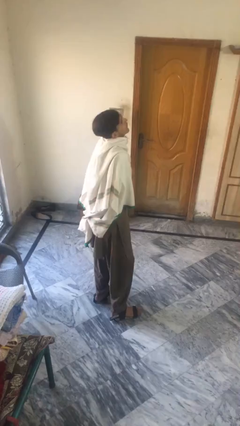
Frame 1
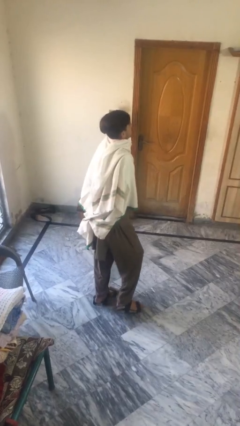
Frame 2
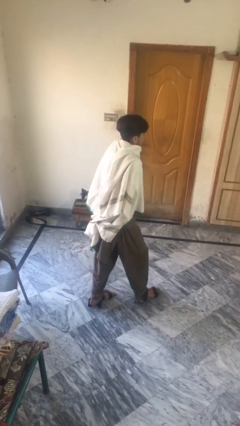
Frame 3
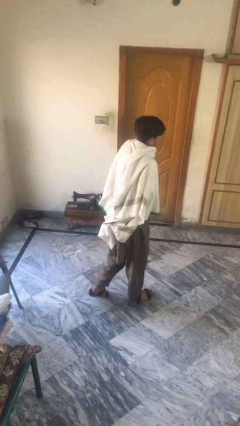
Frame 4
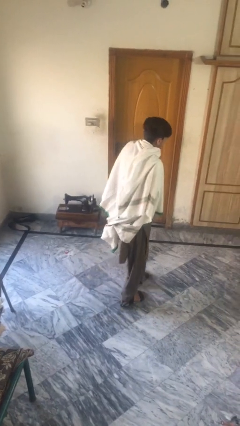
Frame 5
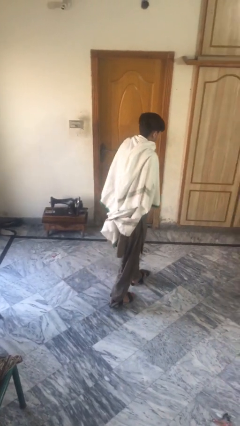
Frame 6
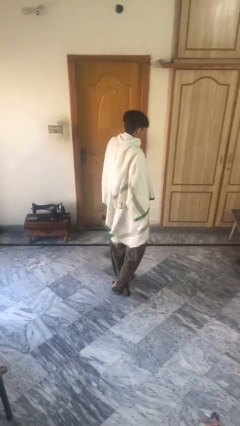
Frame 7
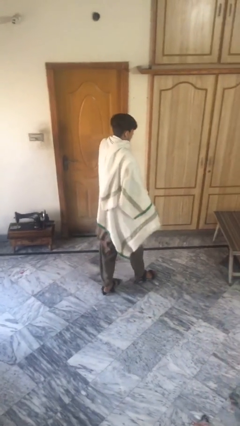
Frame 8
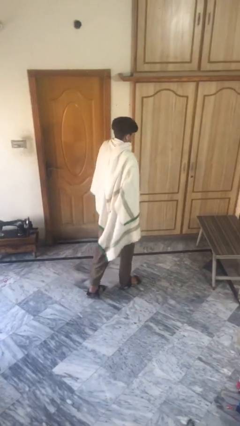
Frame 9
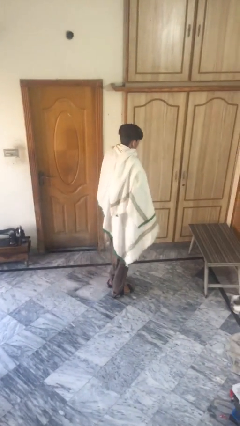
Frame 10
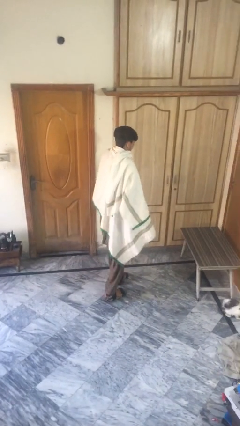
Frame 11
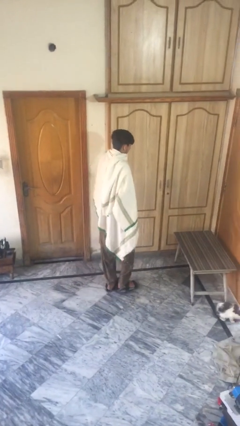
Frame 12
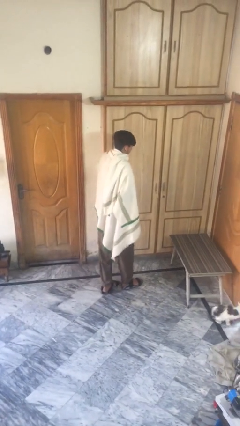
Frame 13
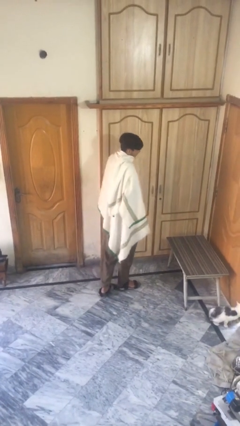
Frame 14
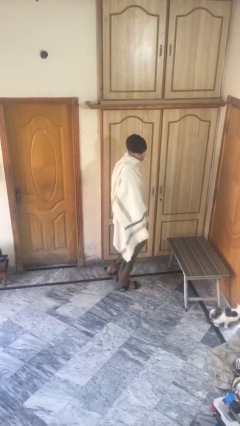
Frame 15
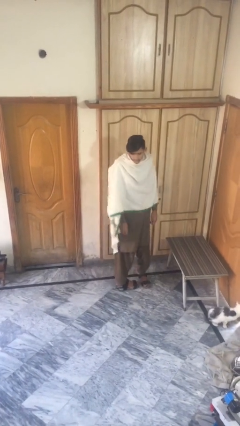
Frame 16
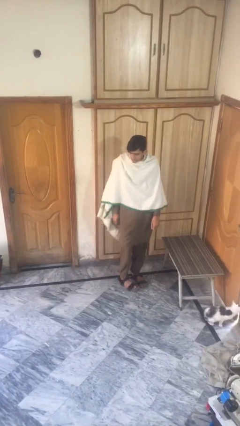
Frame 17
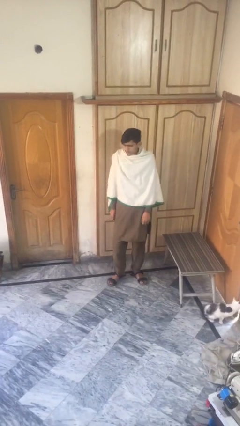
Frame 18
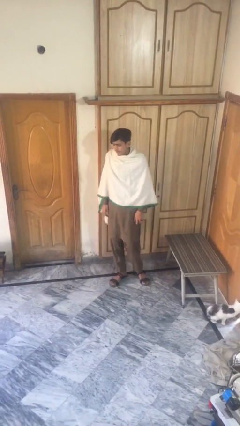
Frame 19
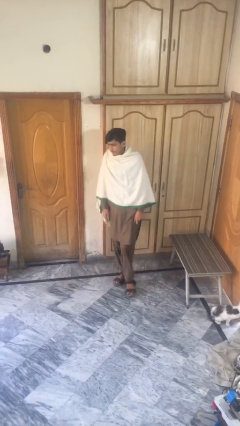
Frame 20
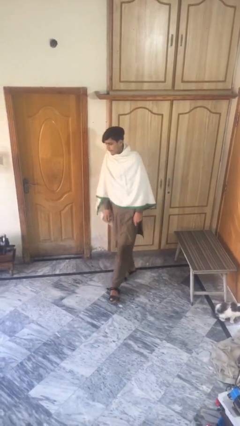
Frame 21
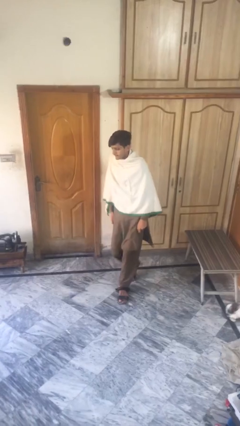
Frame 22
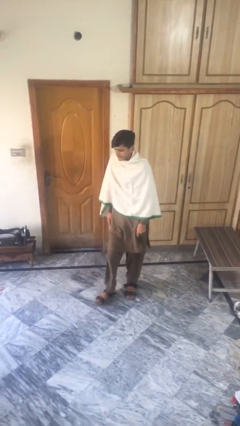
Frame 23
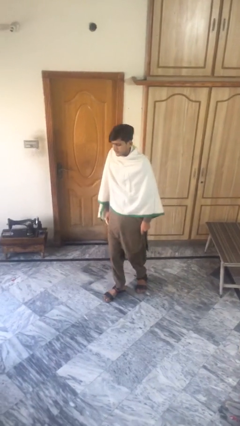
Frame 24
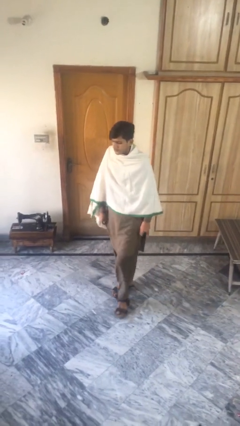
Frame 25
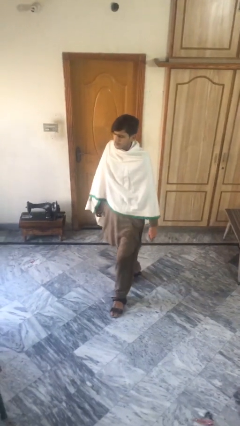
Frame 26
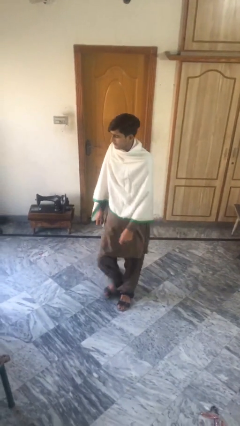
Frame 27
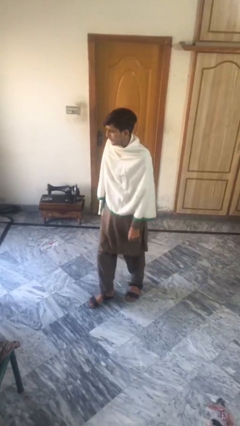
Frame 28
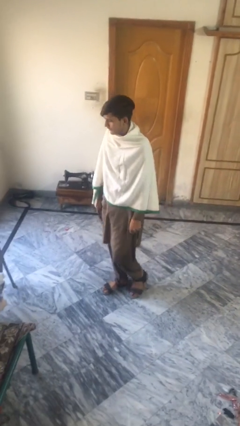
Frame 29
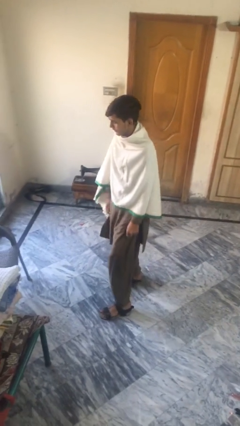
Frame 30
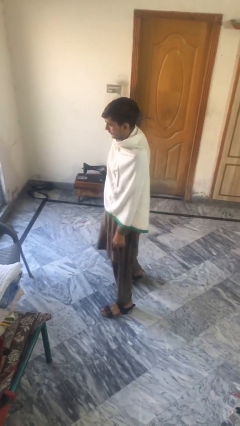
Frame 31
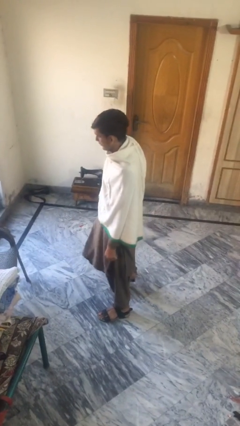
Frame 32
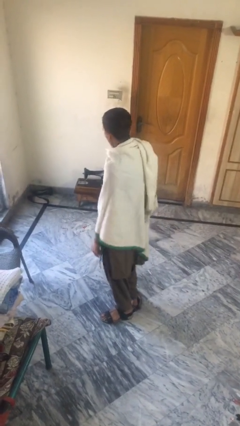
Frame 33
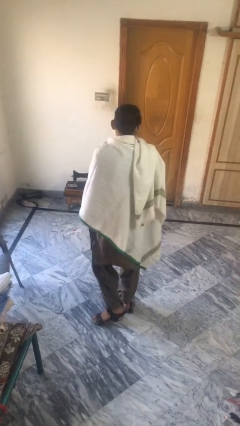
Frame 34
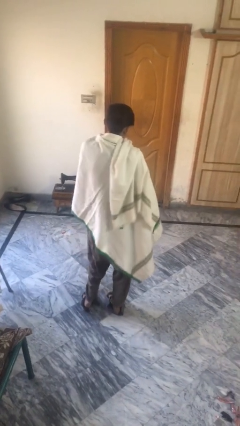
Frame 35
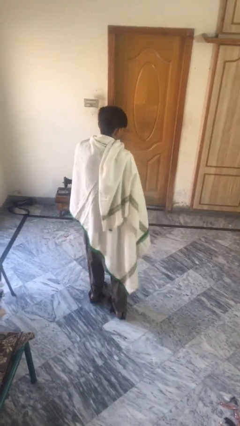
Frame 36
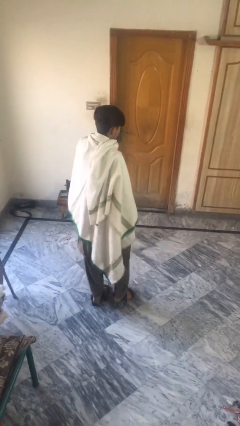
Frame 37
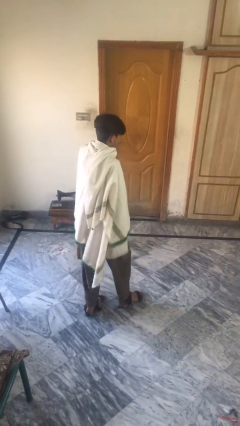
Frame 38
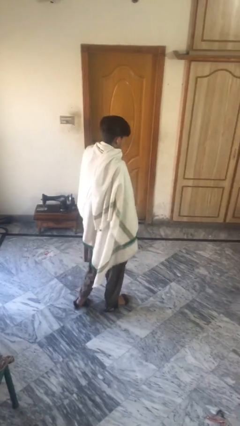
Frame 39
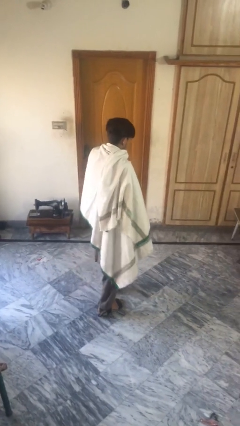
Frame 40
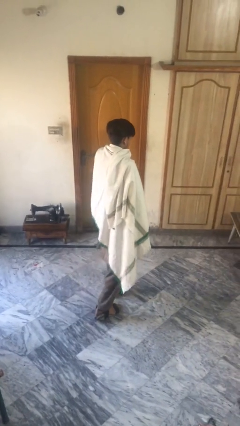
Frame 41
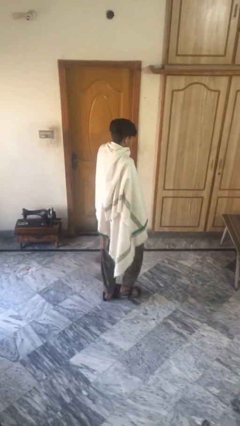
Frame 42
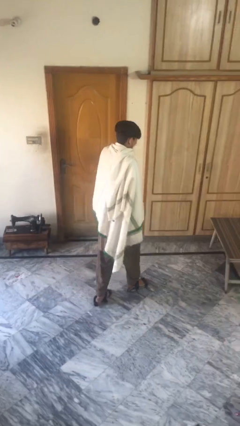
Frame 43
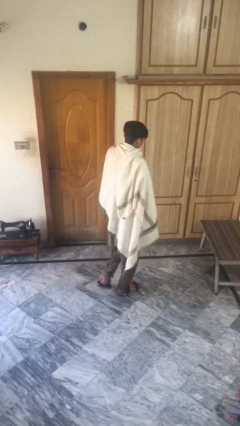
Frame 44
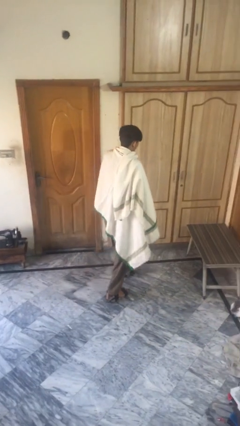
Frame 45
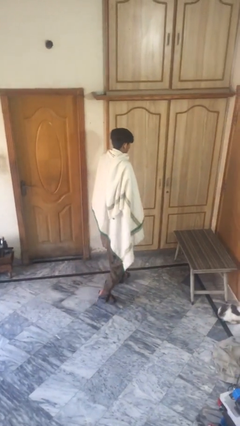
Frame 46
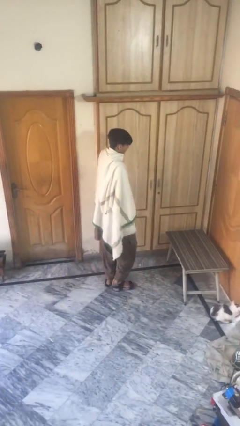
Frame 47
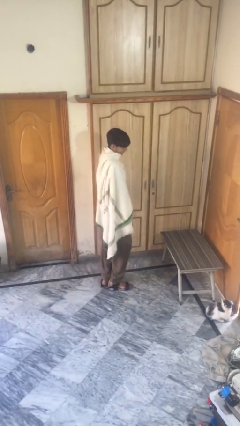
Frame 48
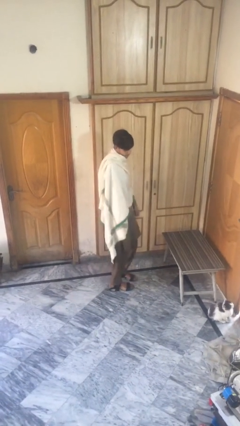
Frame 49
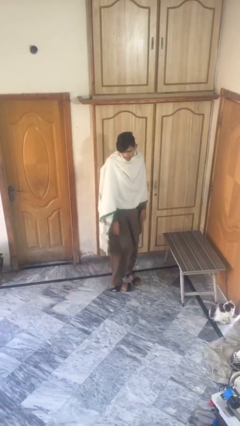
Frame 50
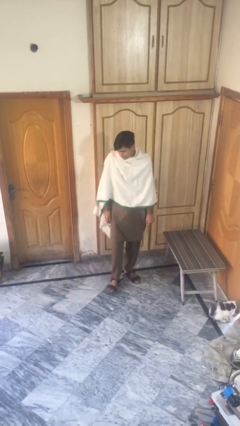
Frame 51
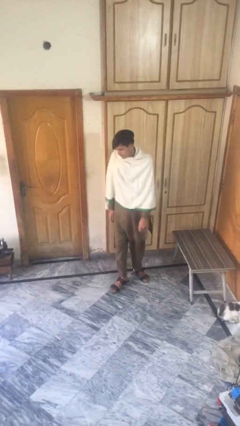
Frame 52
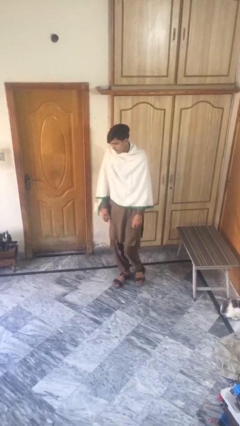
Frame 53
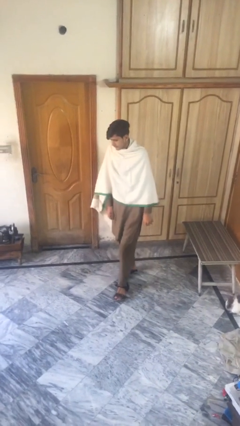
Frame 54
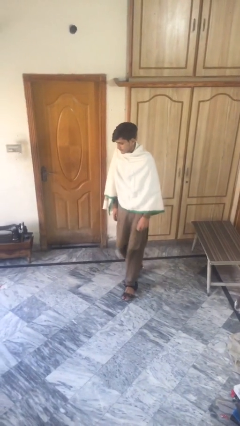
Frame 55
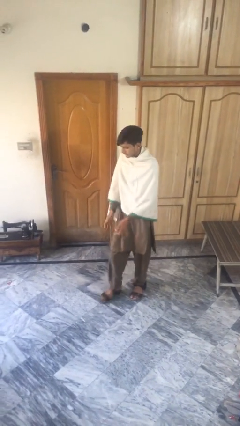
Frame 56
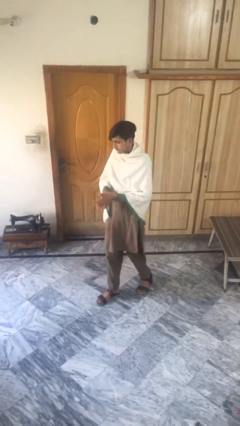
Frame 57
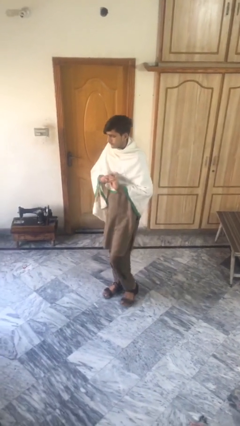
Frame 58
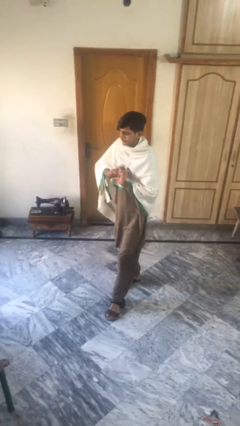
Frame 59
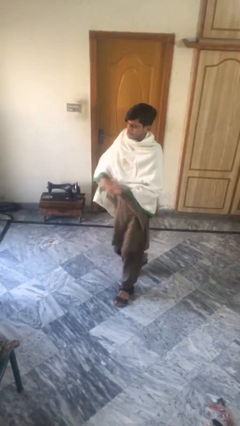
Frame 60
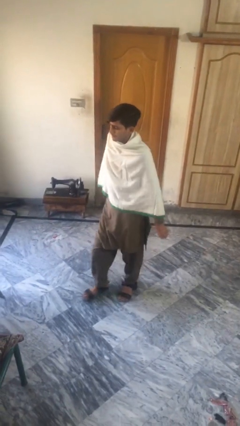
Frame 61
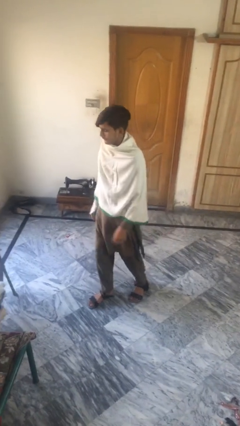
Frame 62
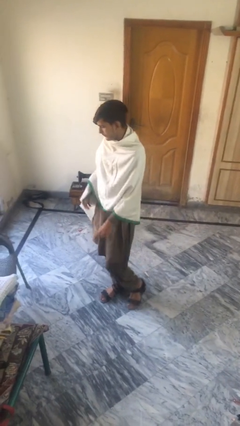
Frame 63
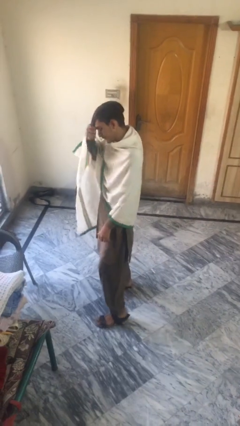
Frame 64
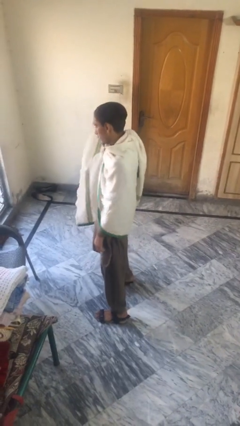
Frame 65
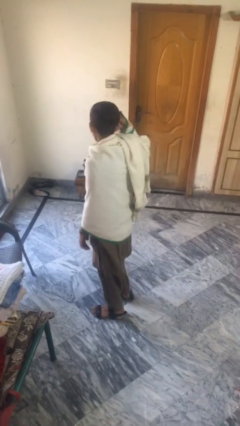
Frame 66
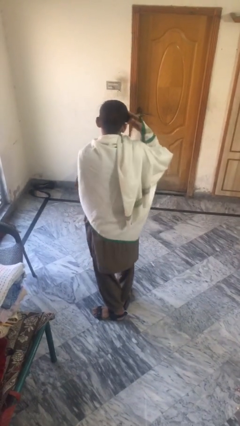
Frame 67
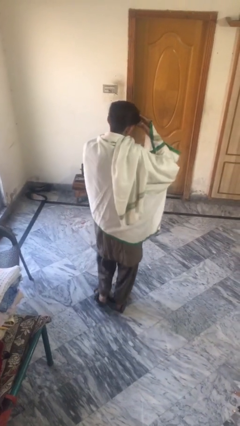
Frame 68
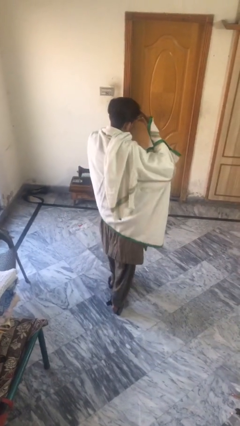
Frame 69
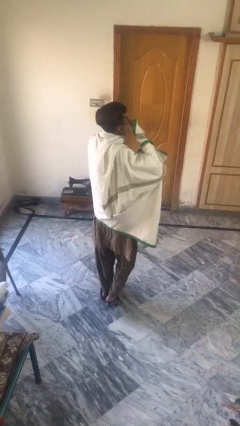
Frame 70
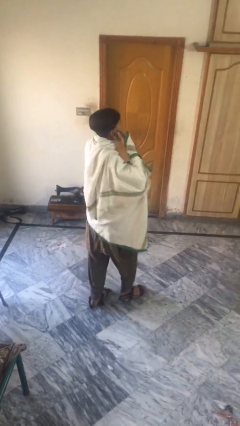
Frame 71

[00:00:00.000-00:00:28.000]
person walks

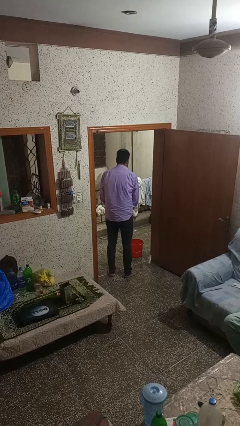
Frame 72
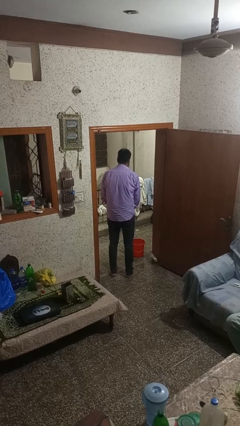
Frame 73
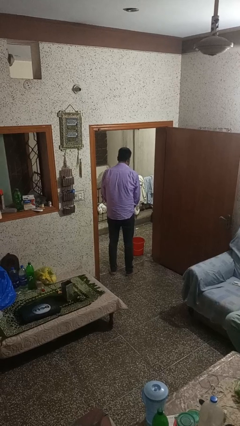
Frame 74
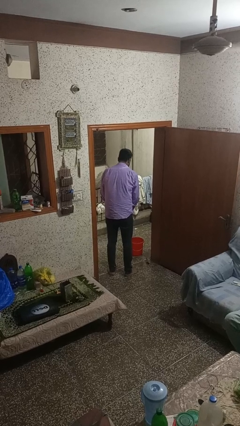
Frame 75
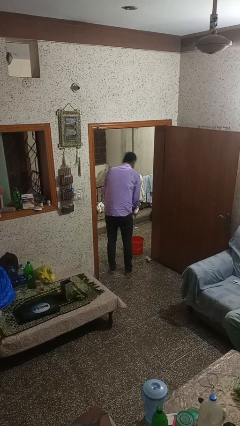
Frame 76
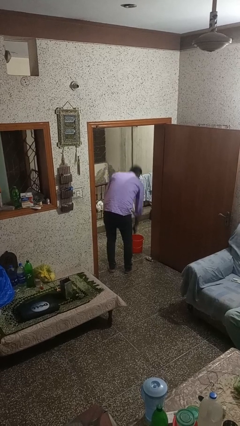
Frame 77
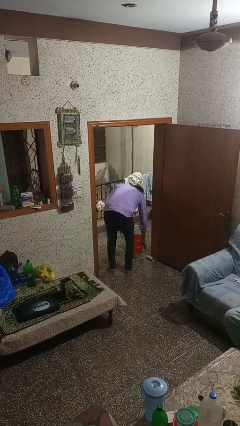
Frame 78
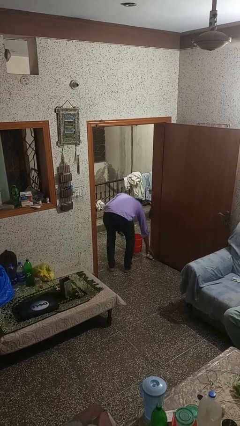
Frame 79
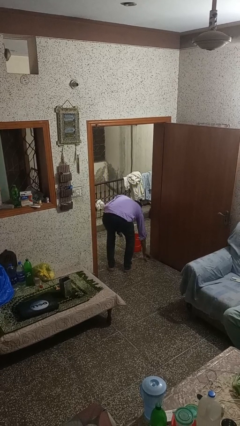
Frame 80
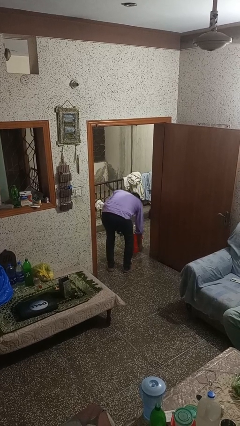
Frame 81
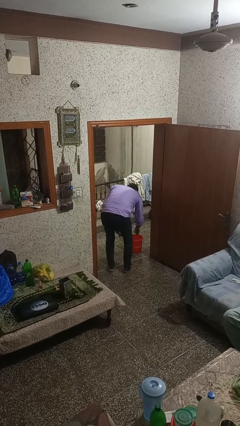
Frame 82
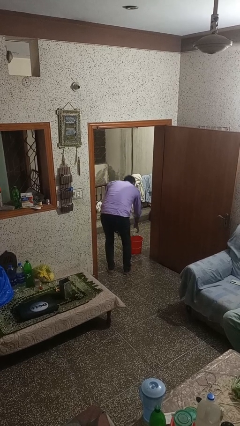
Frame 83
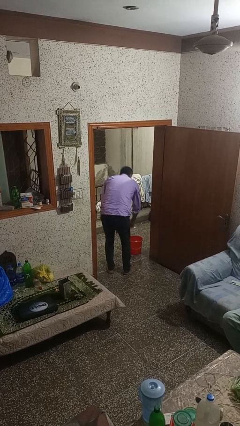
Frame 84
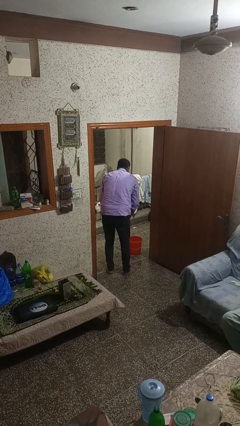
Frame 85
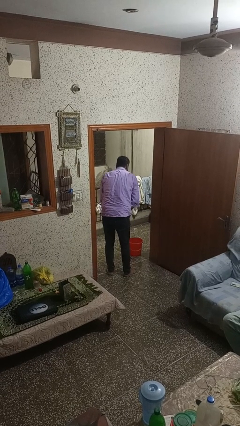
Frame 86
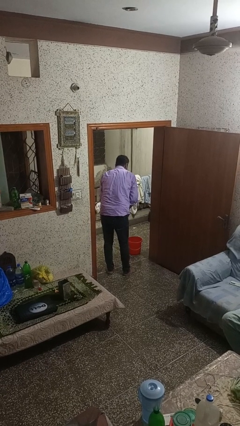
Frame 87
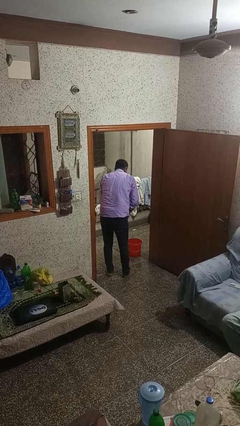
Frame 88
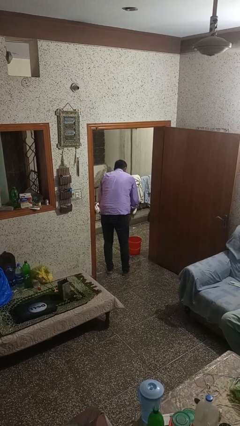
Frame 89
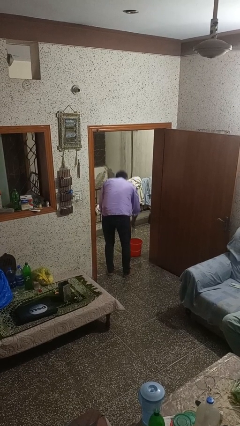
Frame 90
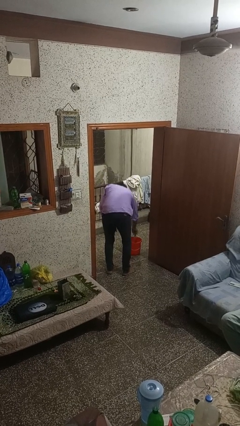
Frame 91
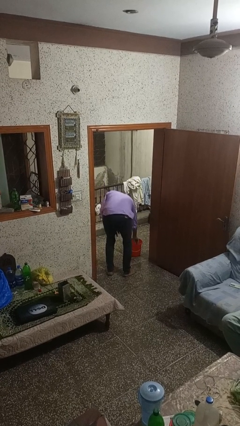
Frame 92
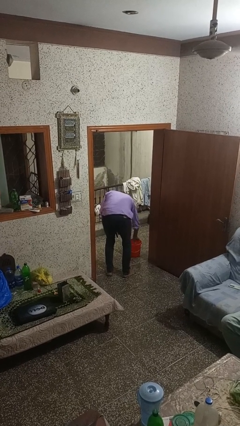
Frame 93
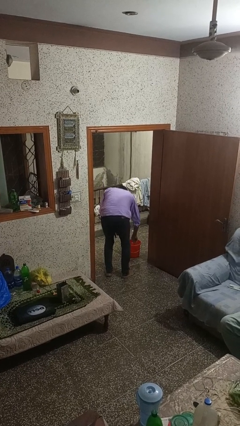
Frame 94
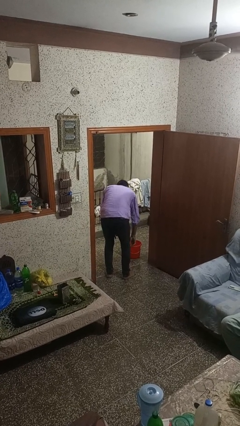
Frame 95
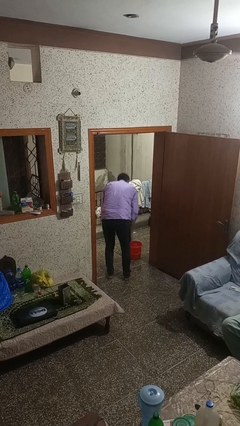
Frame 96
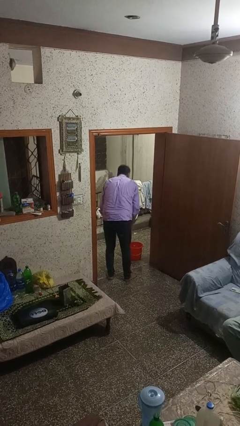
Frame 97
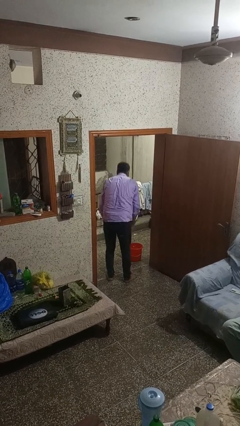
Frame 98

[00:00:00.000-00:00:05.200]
person discards trash
